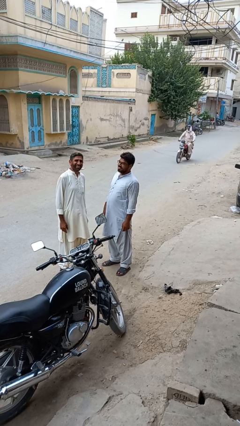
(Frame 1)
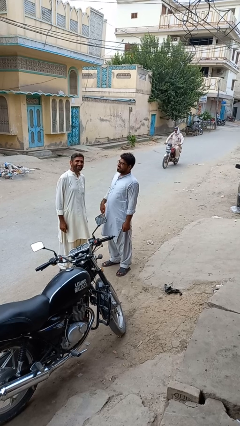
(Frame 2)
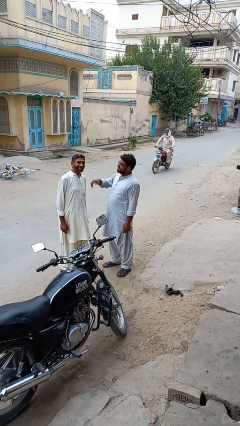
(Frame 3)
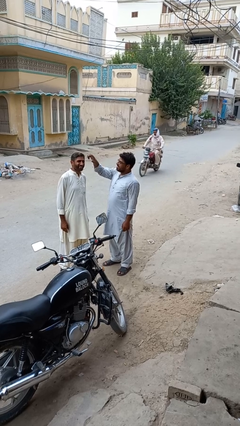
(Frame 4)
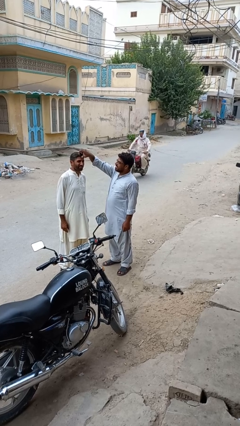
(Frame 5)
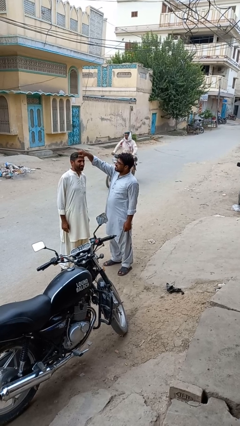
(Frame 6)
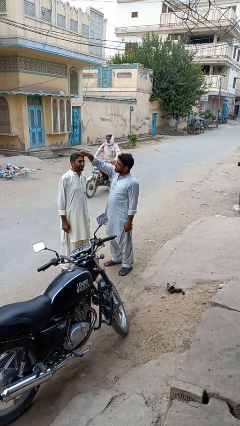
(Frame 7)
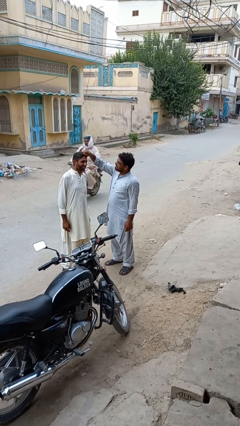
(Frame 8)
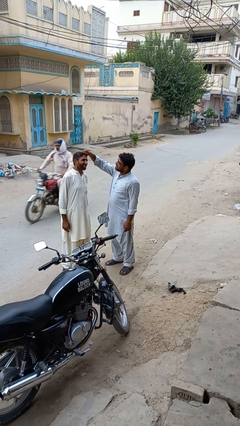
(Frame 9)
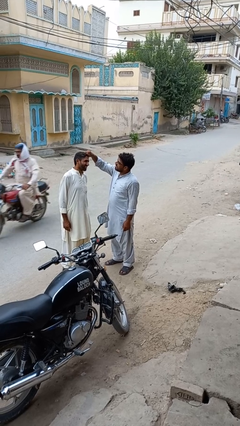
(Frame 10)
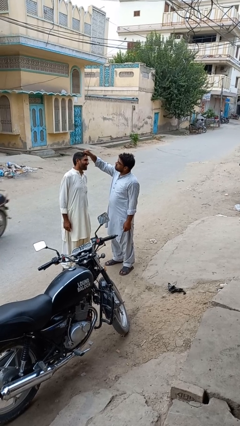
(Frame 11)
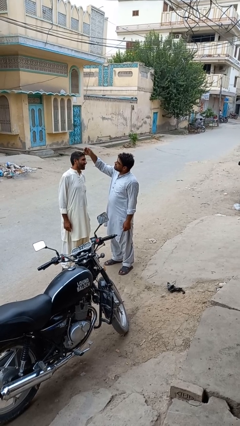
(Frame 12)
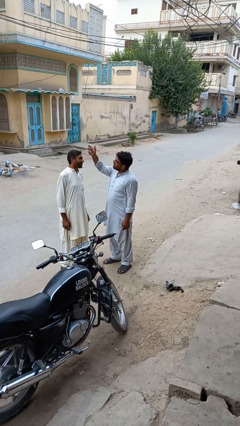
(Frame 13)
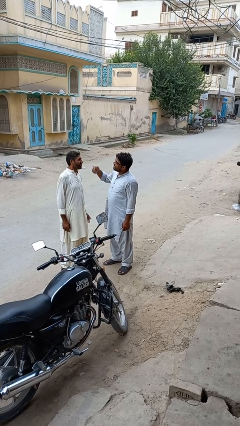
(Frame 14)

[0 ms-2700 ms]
person grabs person by hair

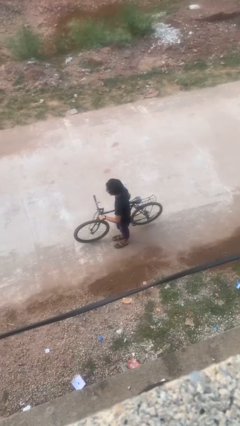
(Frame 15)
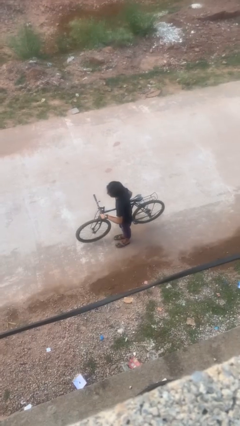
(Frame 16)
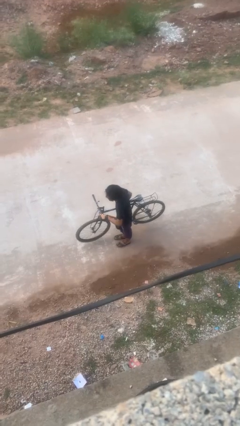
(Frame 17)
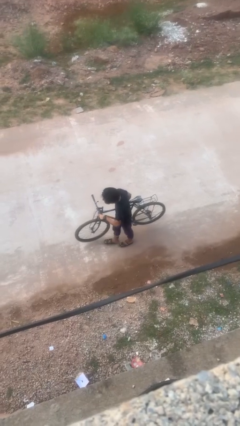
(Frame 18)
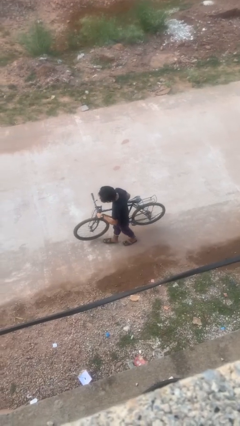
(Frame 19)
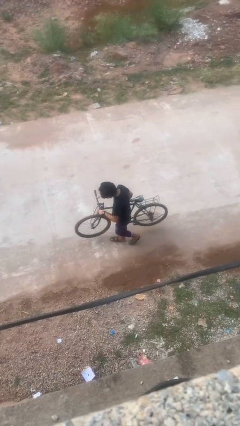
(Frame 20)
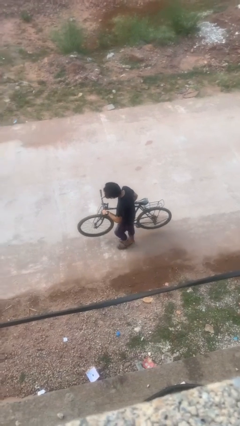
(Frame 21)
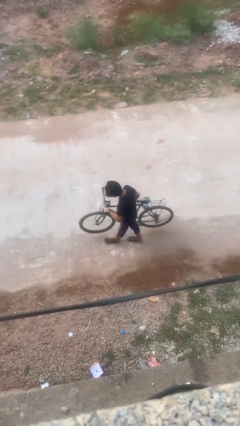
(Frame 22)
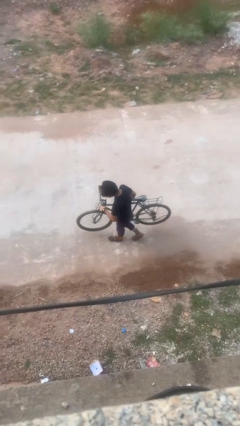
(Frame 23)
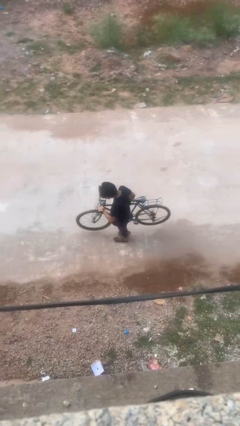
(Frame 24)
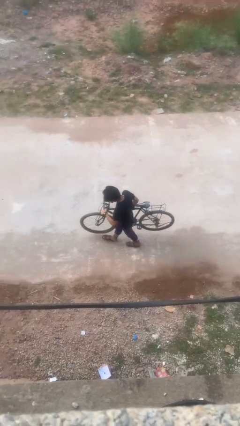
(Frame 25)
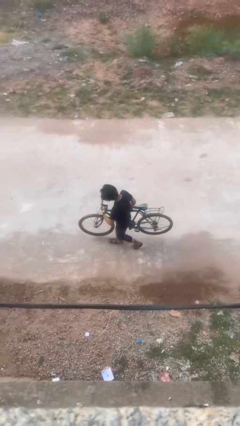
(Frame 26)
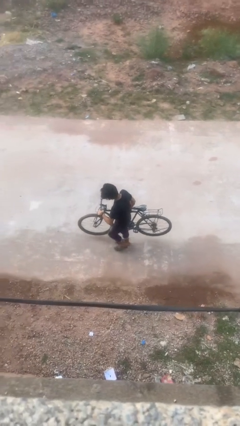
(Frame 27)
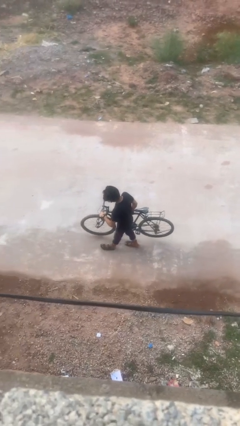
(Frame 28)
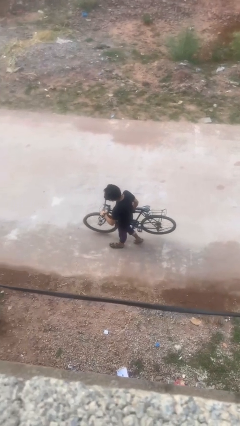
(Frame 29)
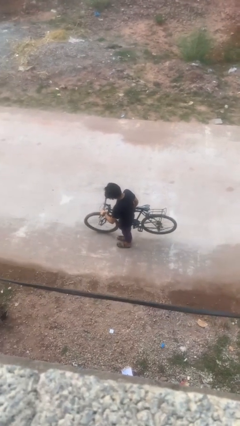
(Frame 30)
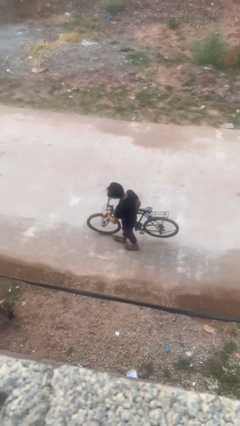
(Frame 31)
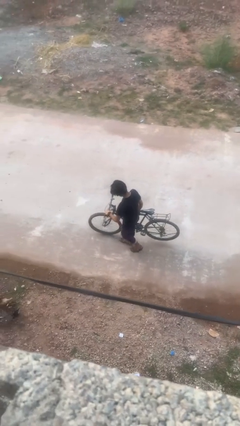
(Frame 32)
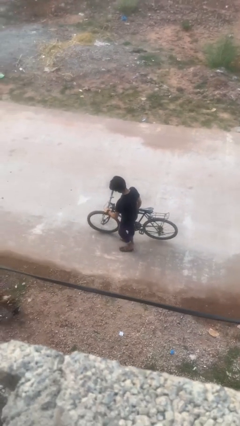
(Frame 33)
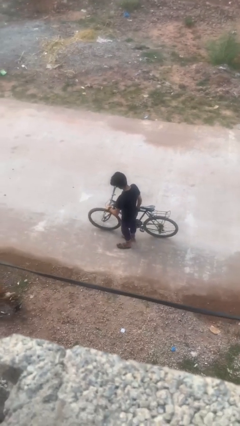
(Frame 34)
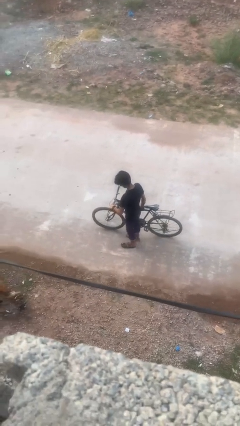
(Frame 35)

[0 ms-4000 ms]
person carries bicycle

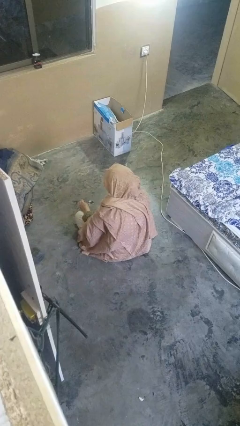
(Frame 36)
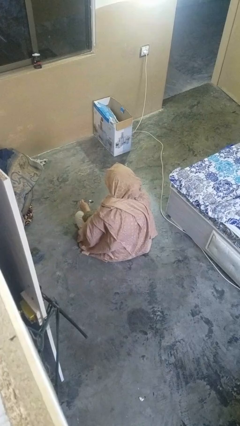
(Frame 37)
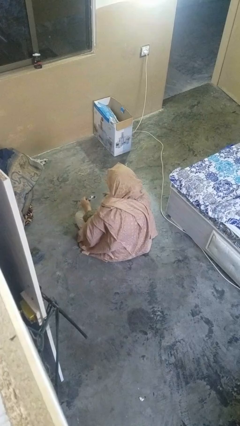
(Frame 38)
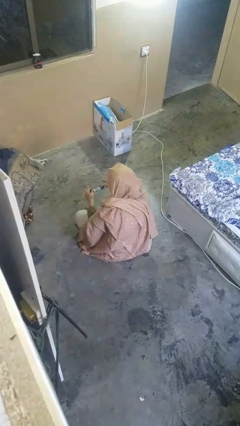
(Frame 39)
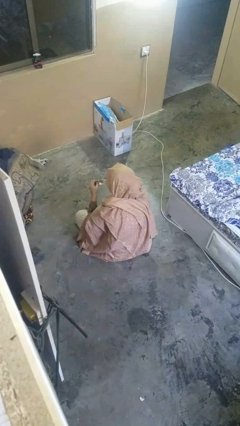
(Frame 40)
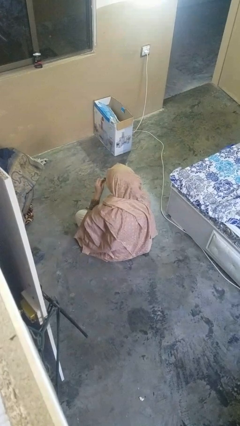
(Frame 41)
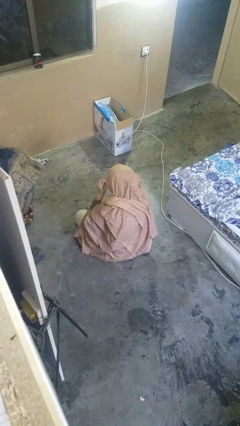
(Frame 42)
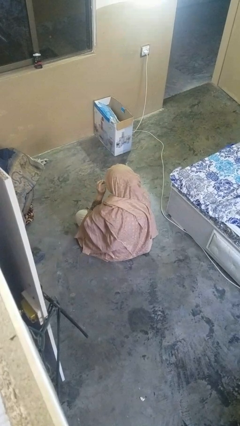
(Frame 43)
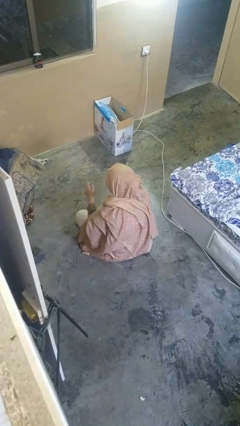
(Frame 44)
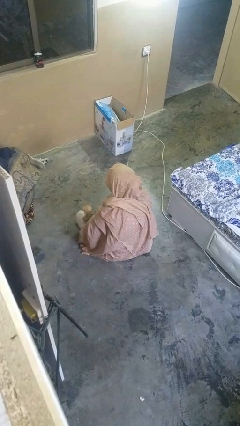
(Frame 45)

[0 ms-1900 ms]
person puts on glasses

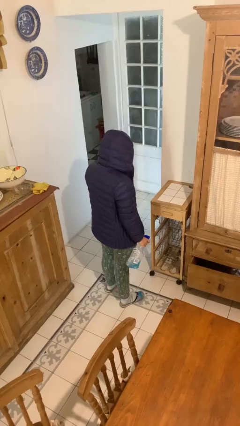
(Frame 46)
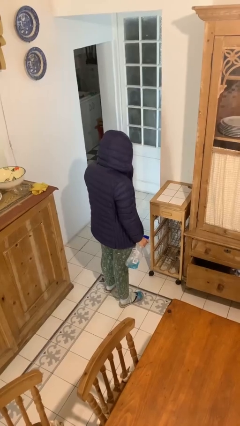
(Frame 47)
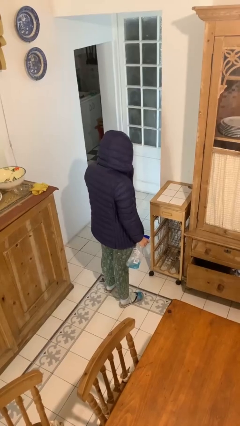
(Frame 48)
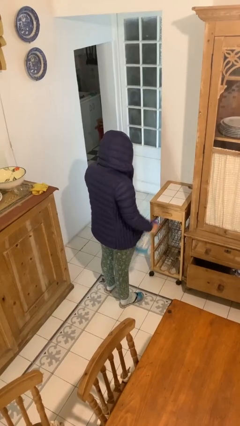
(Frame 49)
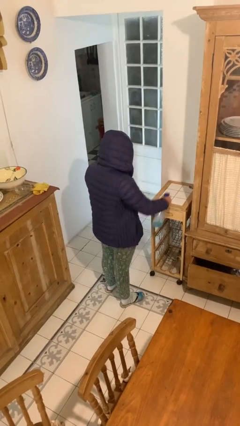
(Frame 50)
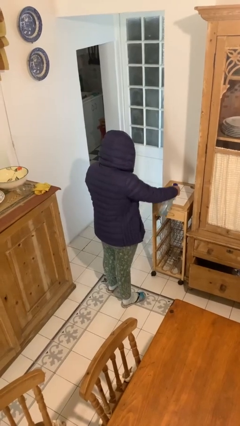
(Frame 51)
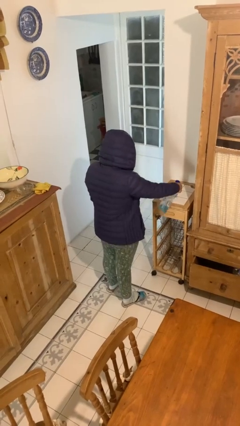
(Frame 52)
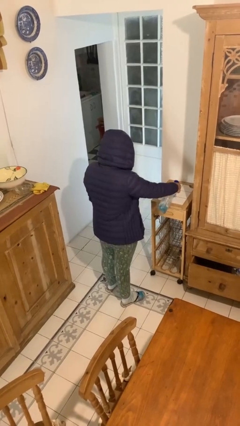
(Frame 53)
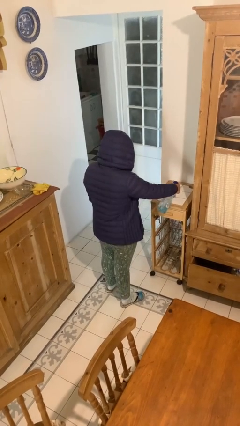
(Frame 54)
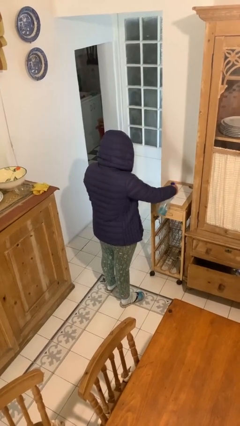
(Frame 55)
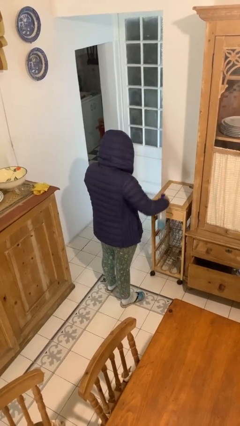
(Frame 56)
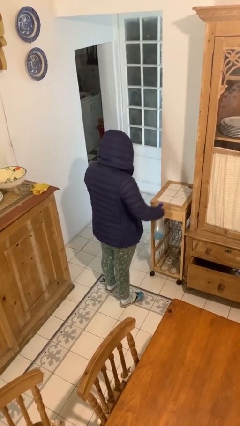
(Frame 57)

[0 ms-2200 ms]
person sprays from bottle

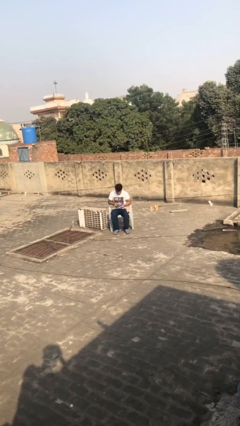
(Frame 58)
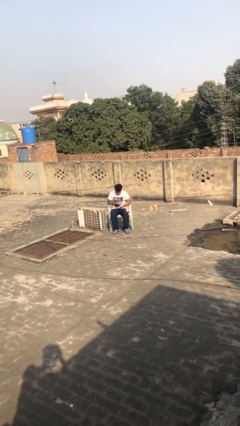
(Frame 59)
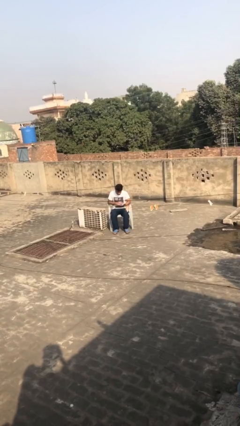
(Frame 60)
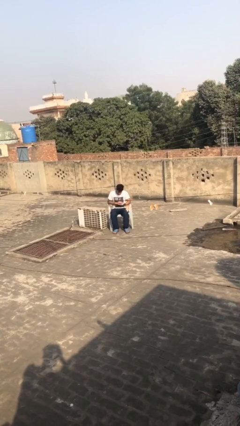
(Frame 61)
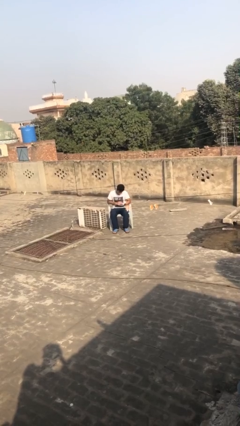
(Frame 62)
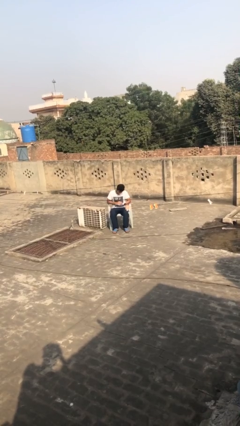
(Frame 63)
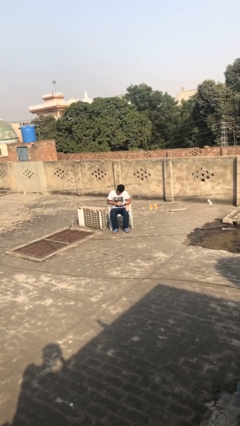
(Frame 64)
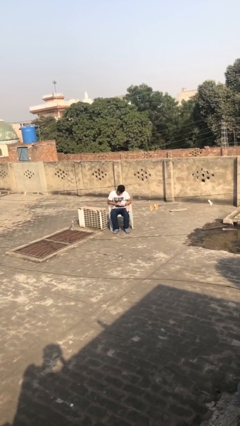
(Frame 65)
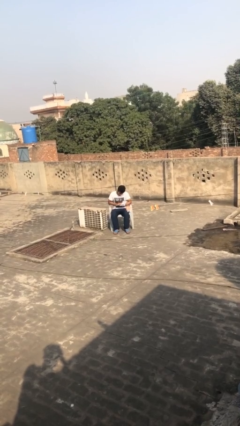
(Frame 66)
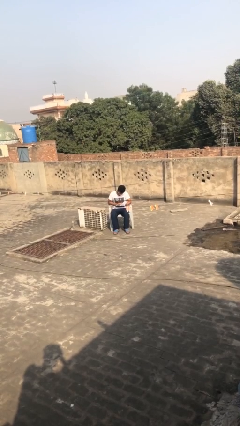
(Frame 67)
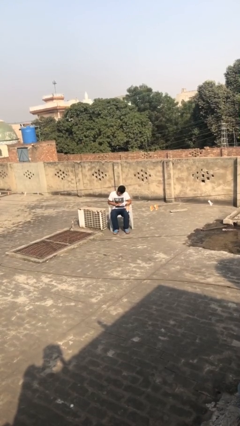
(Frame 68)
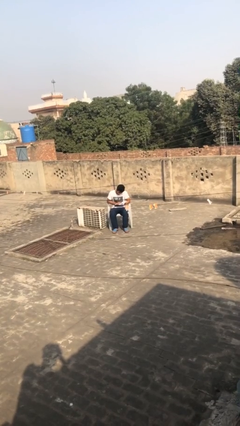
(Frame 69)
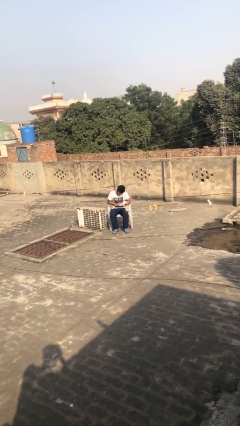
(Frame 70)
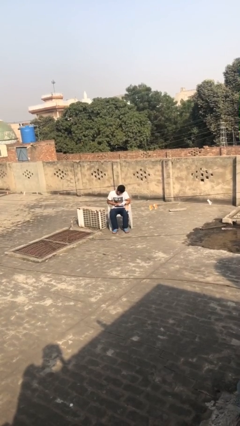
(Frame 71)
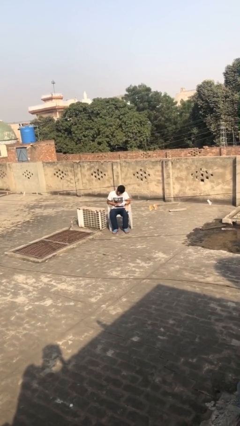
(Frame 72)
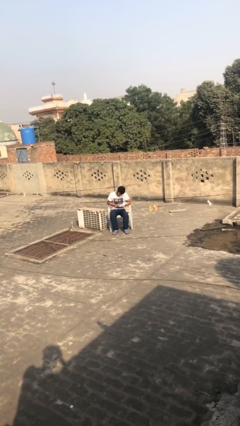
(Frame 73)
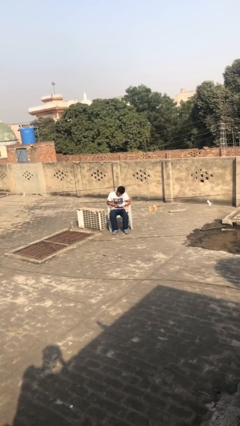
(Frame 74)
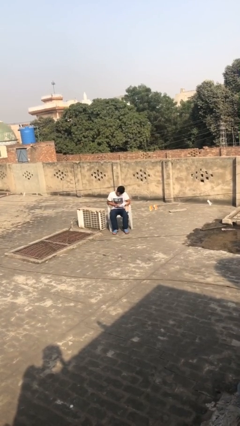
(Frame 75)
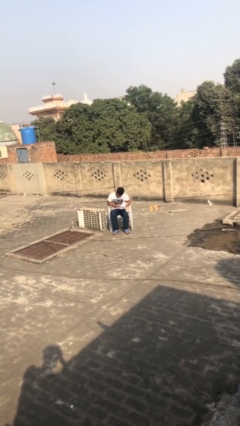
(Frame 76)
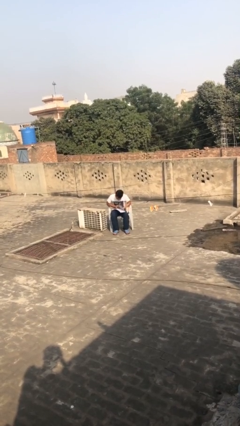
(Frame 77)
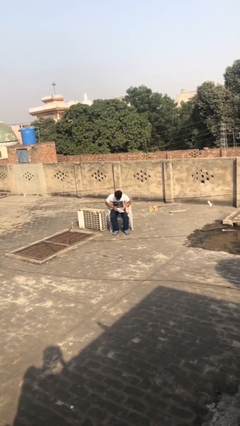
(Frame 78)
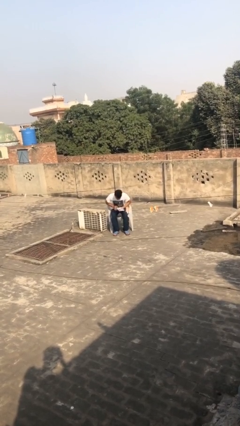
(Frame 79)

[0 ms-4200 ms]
person reads document

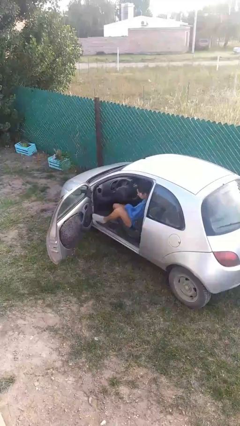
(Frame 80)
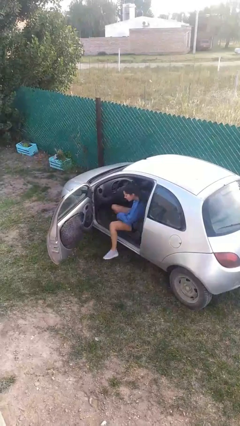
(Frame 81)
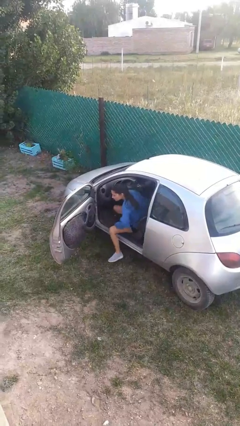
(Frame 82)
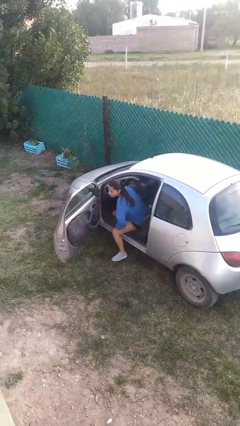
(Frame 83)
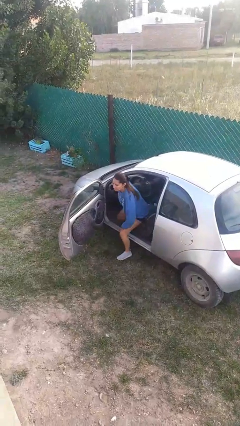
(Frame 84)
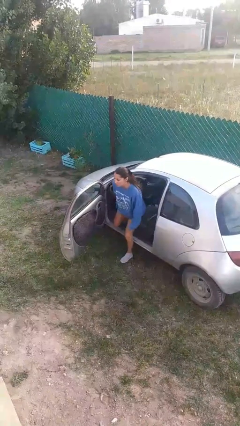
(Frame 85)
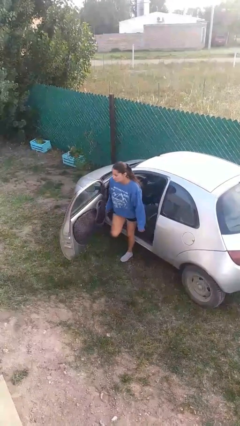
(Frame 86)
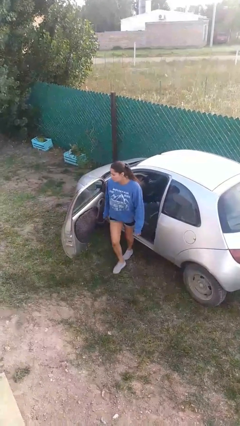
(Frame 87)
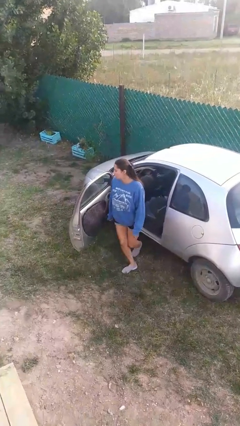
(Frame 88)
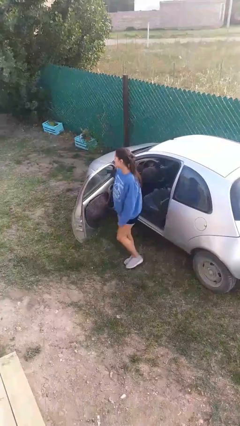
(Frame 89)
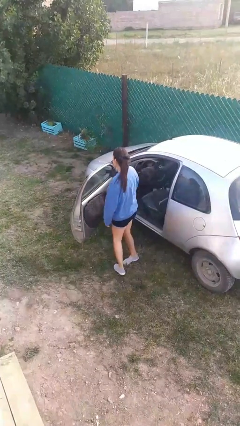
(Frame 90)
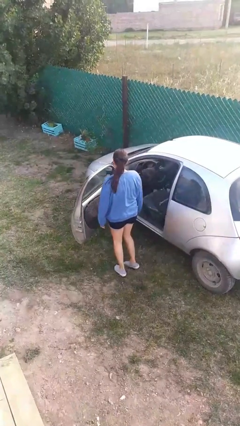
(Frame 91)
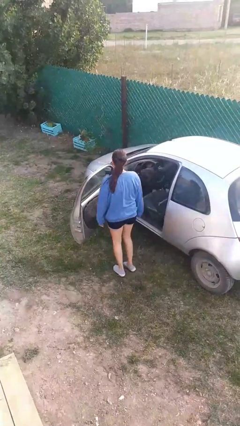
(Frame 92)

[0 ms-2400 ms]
person exits car

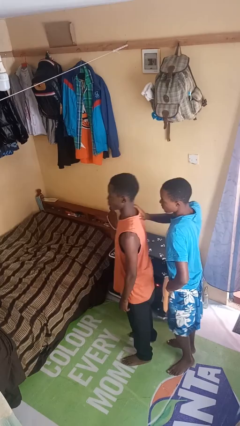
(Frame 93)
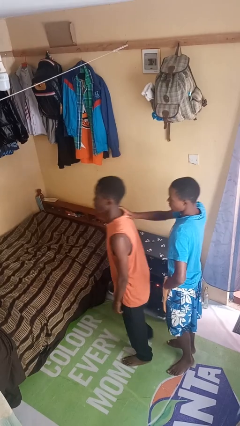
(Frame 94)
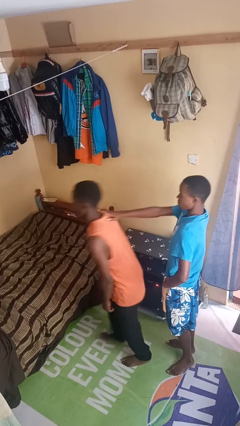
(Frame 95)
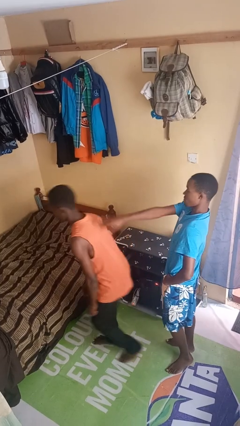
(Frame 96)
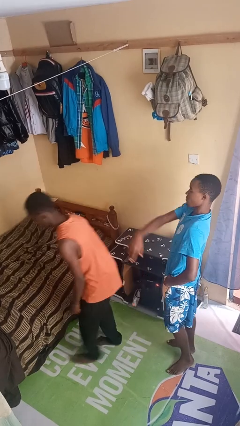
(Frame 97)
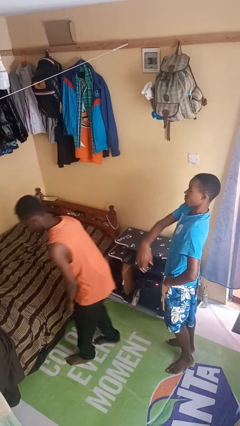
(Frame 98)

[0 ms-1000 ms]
person shoves person
